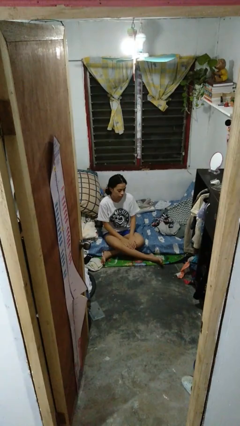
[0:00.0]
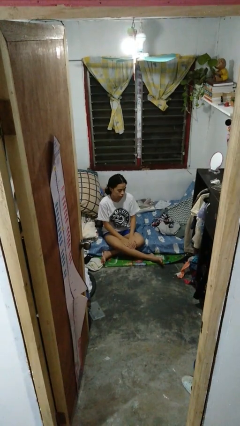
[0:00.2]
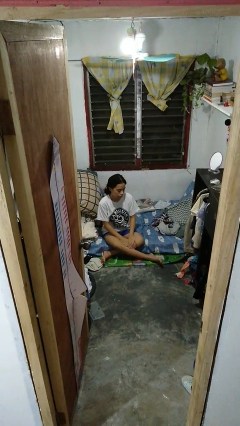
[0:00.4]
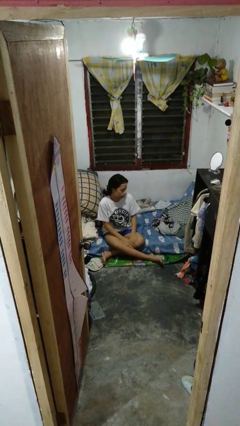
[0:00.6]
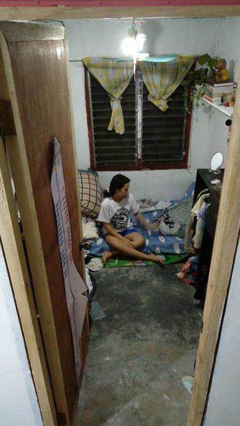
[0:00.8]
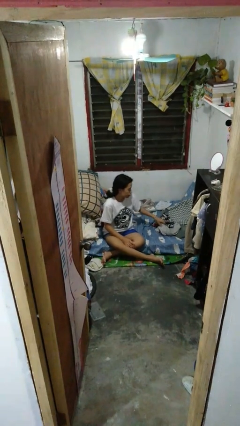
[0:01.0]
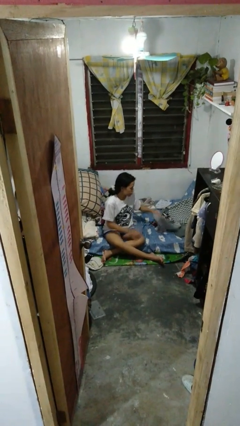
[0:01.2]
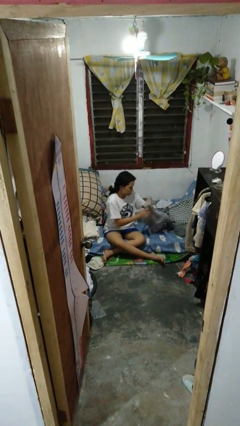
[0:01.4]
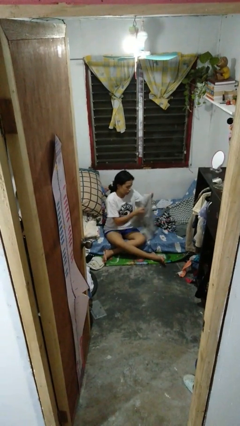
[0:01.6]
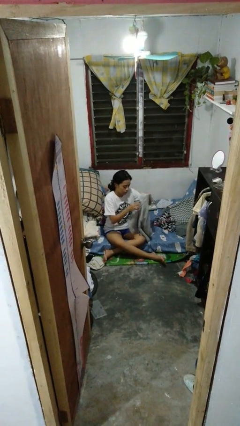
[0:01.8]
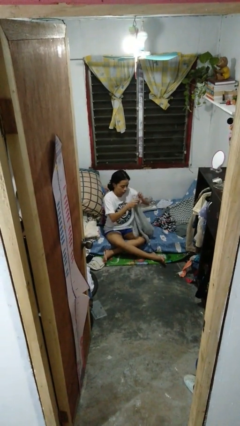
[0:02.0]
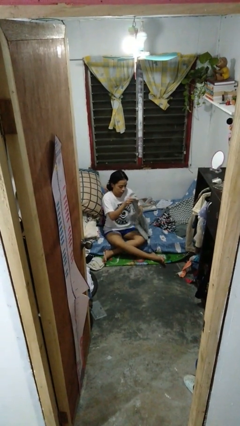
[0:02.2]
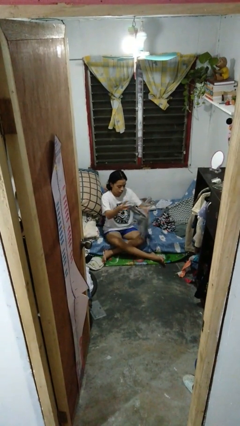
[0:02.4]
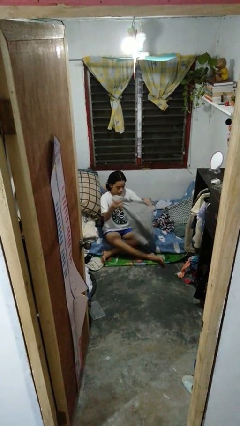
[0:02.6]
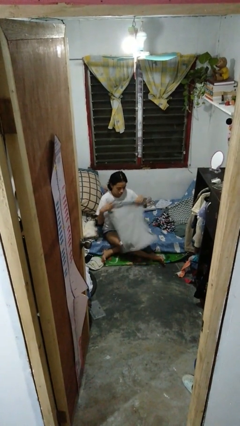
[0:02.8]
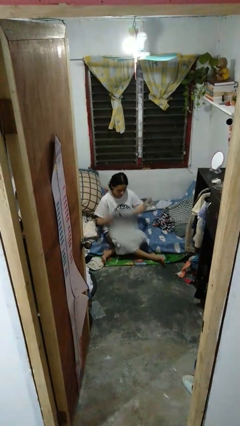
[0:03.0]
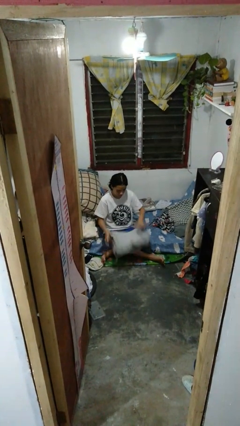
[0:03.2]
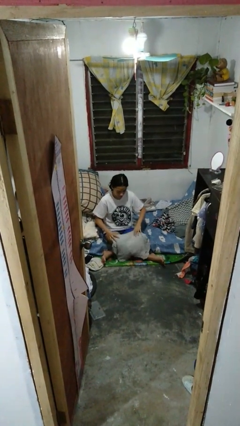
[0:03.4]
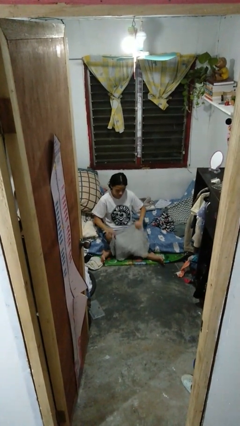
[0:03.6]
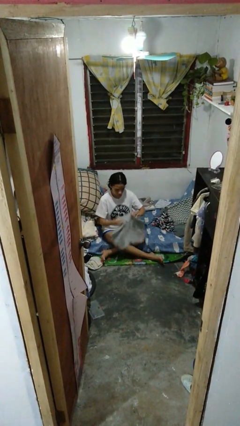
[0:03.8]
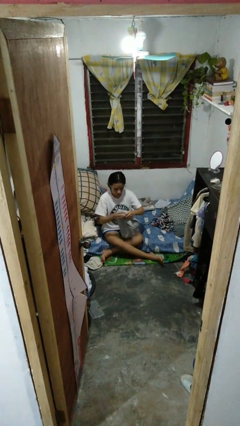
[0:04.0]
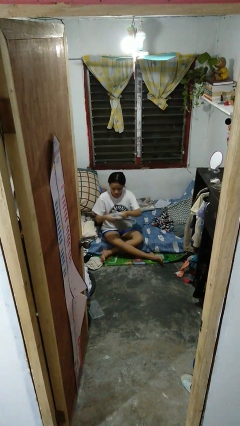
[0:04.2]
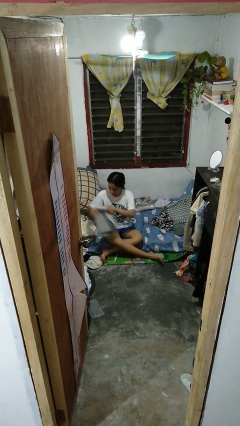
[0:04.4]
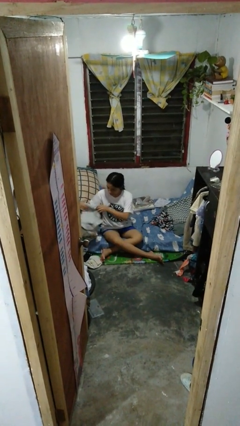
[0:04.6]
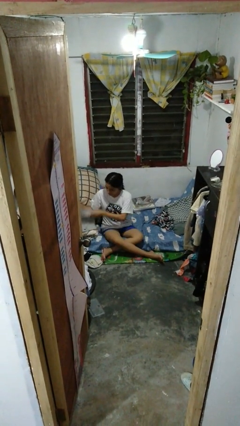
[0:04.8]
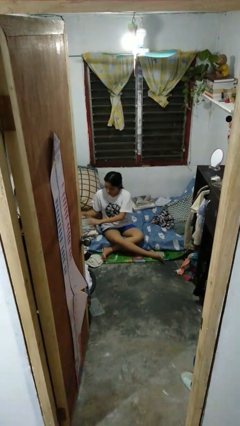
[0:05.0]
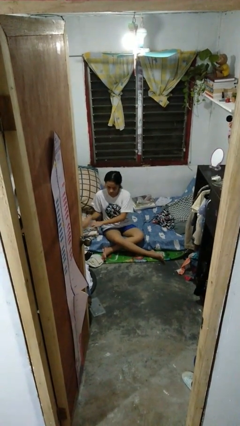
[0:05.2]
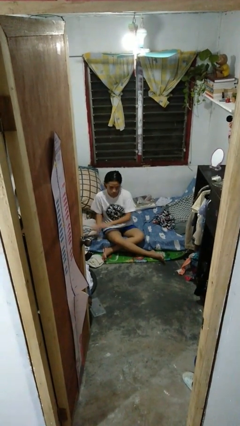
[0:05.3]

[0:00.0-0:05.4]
person folds shirt

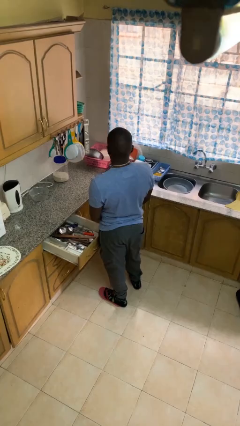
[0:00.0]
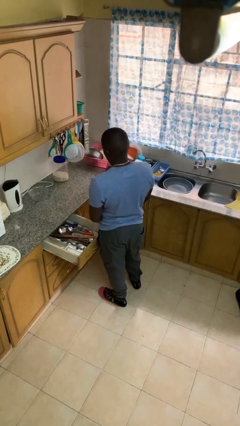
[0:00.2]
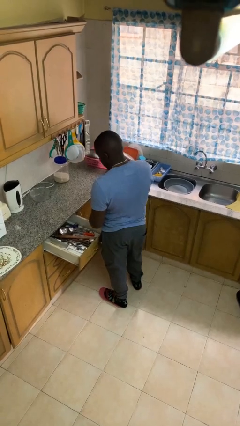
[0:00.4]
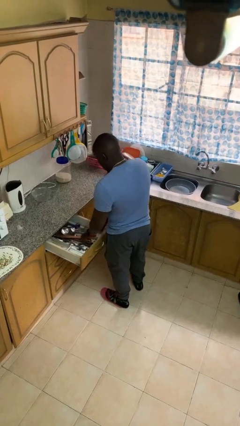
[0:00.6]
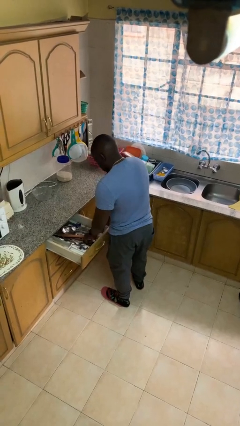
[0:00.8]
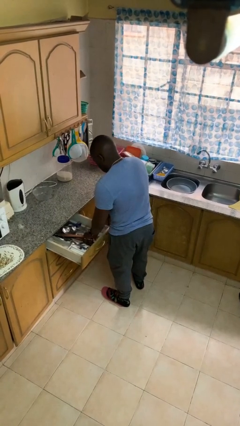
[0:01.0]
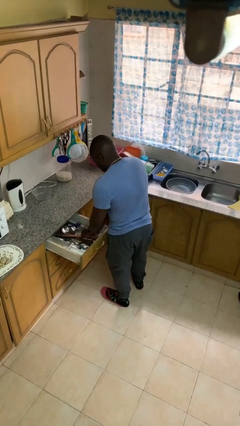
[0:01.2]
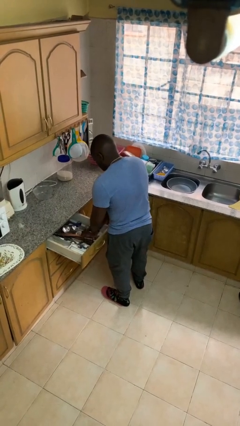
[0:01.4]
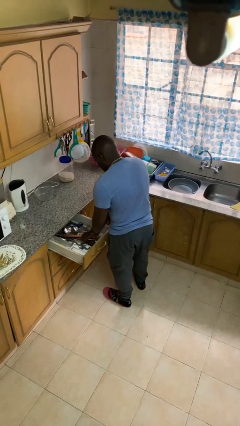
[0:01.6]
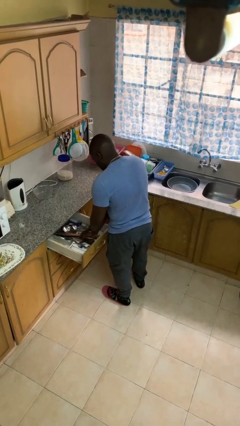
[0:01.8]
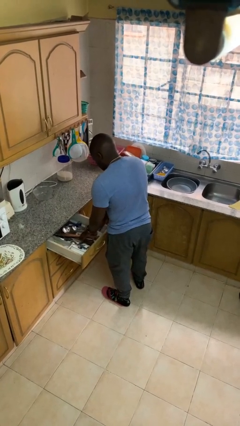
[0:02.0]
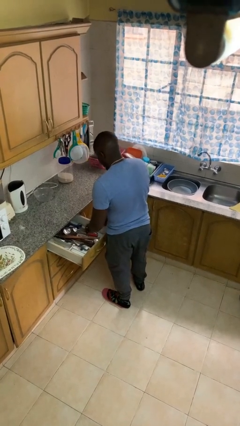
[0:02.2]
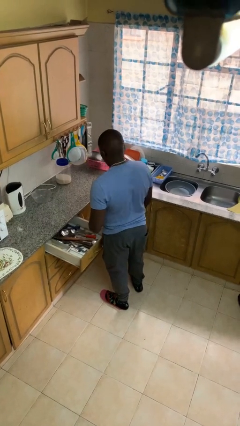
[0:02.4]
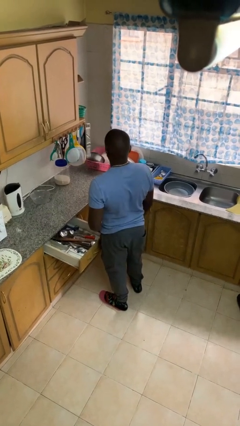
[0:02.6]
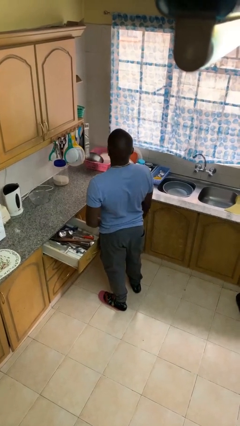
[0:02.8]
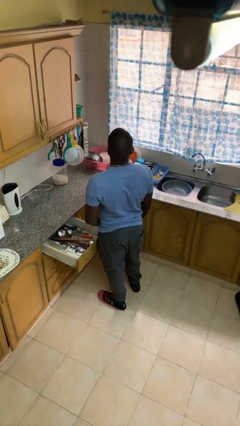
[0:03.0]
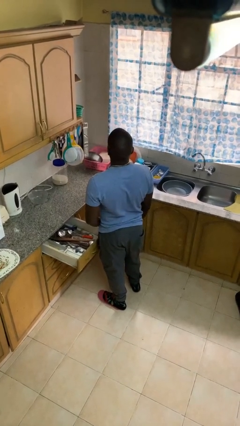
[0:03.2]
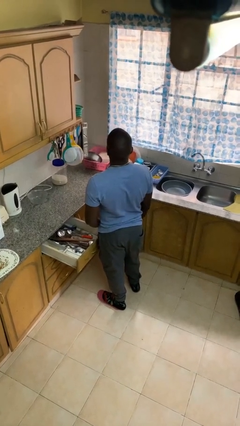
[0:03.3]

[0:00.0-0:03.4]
person searches in kitchen drawer

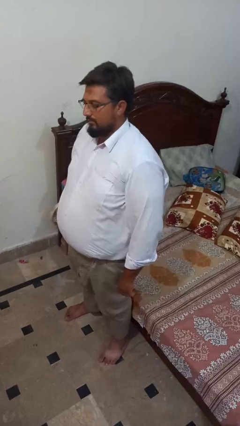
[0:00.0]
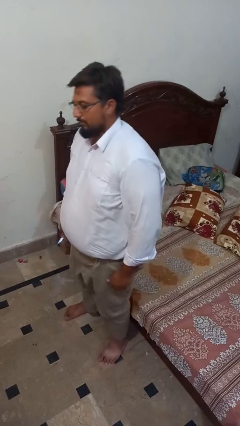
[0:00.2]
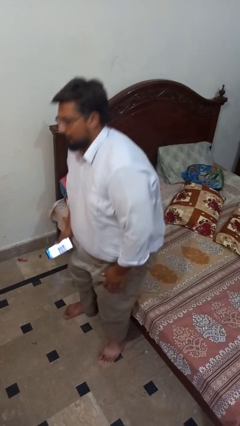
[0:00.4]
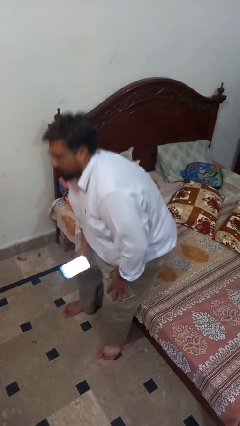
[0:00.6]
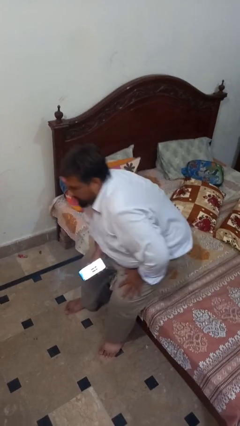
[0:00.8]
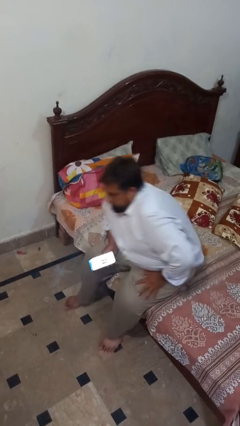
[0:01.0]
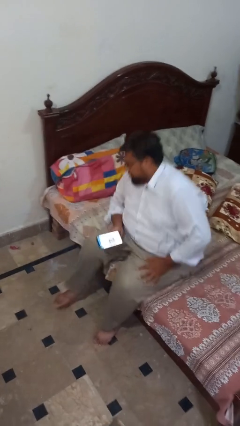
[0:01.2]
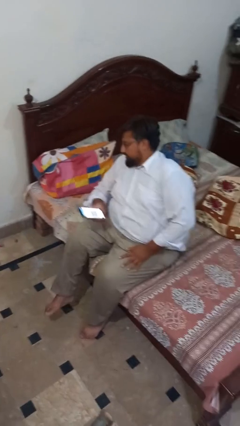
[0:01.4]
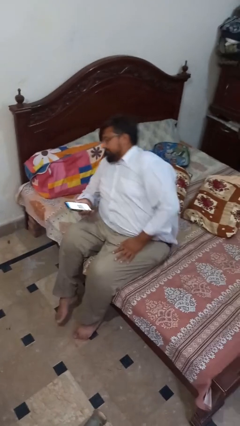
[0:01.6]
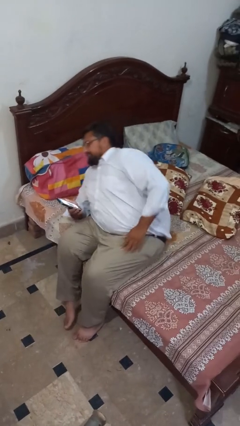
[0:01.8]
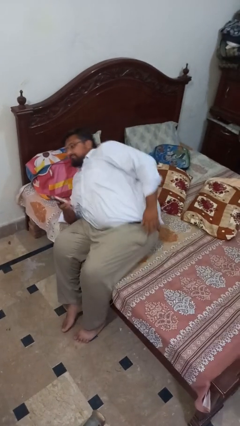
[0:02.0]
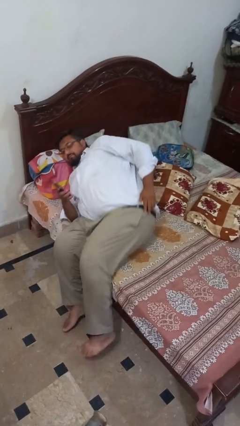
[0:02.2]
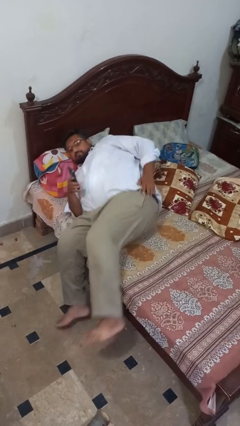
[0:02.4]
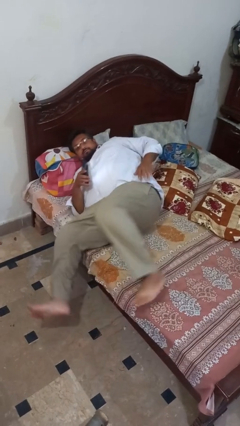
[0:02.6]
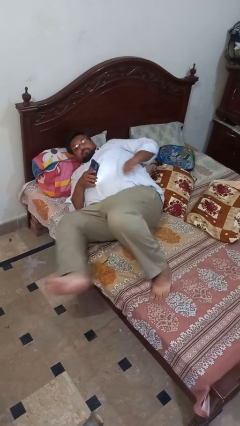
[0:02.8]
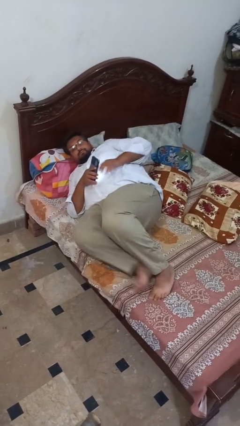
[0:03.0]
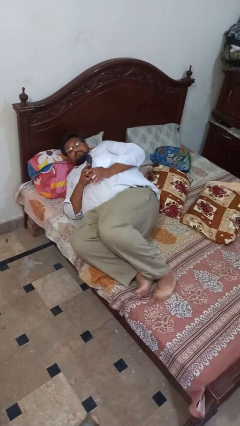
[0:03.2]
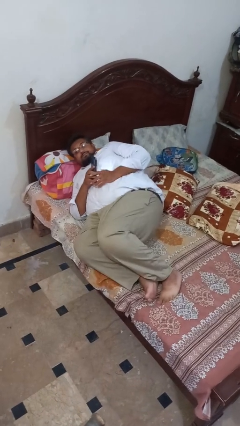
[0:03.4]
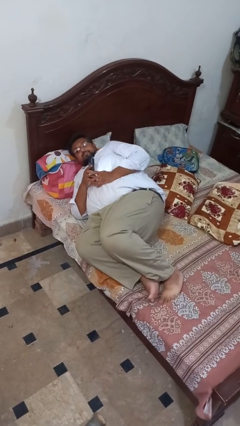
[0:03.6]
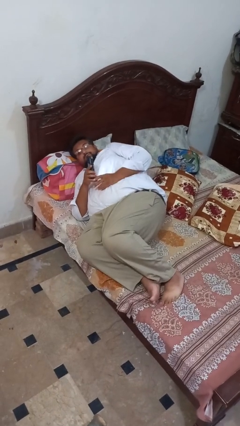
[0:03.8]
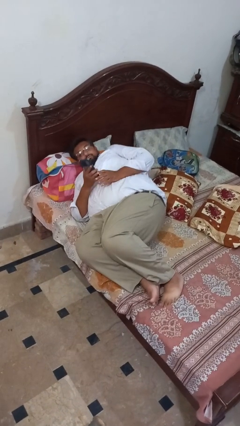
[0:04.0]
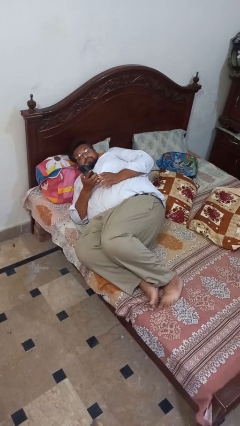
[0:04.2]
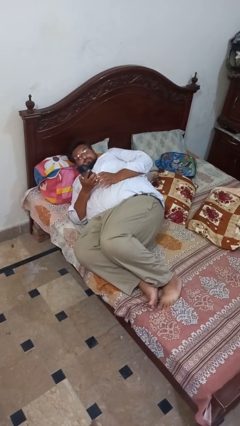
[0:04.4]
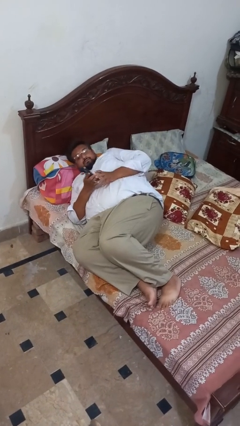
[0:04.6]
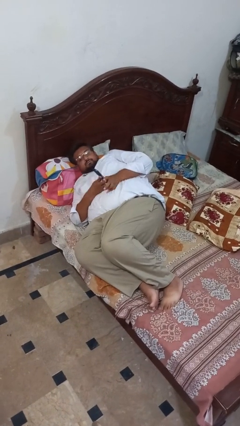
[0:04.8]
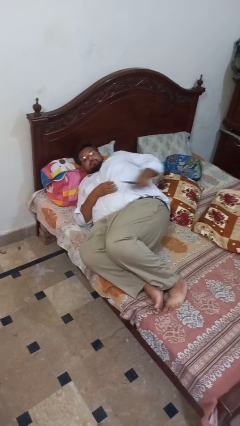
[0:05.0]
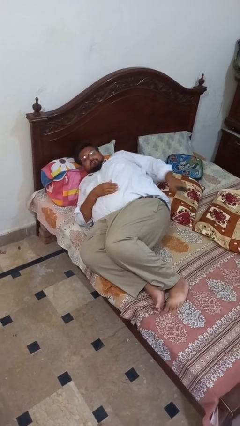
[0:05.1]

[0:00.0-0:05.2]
person lies down on bed

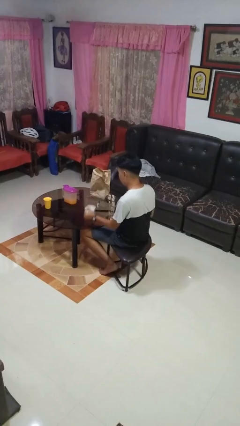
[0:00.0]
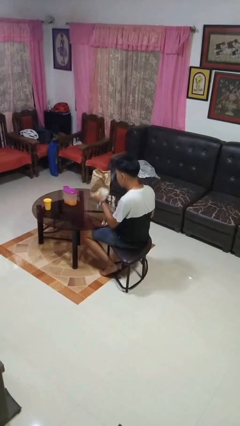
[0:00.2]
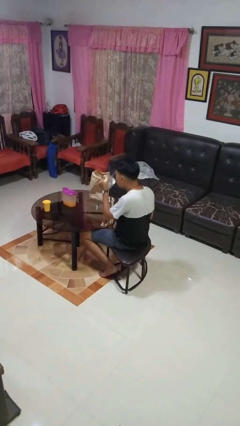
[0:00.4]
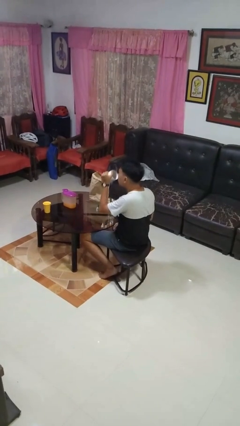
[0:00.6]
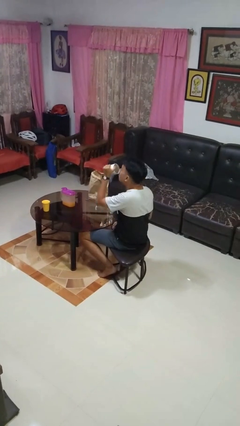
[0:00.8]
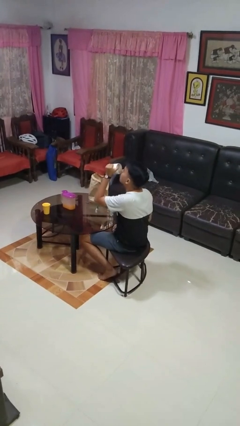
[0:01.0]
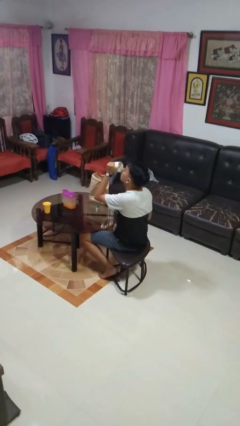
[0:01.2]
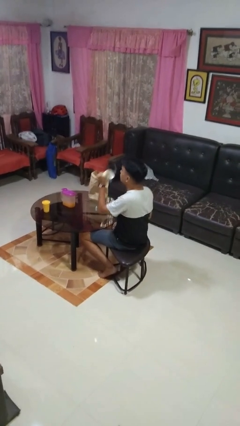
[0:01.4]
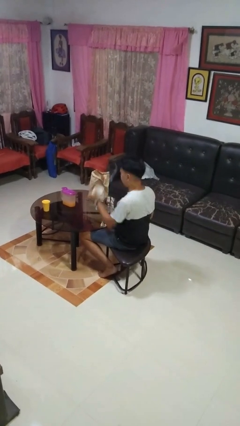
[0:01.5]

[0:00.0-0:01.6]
person drinks from mug

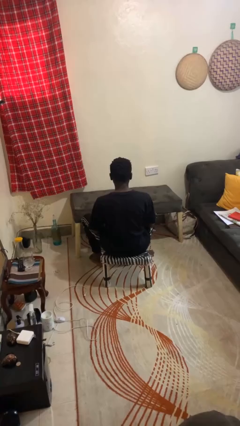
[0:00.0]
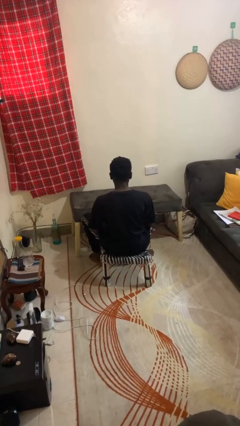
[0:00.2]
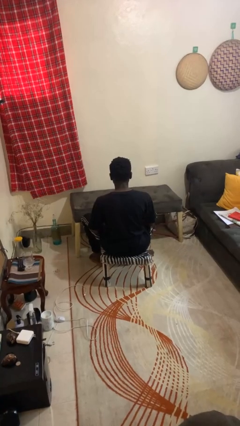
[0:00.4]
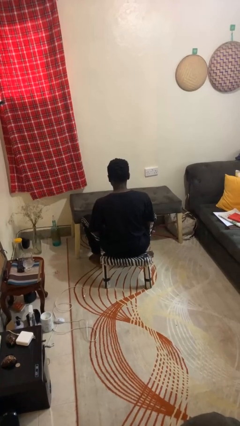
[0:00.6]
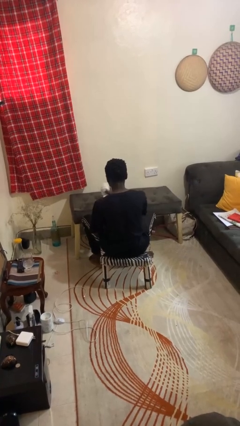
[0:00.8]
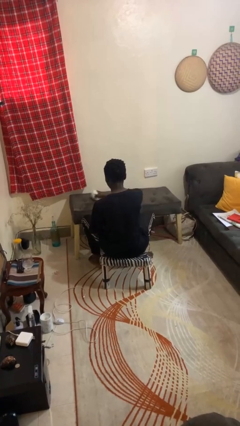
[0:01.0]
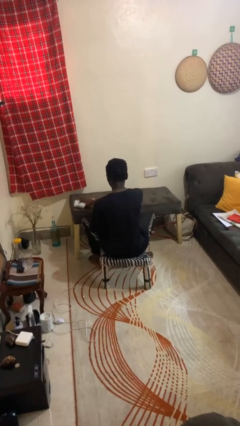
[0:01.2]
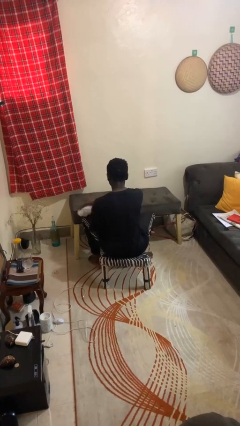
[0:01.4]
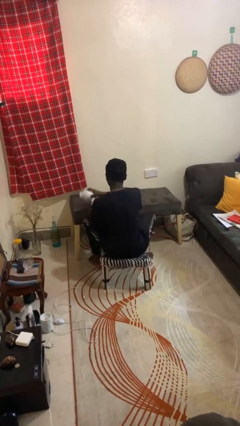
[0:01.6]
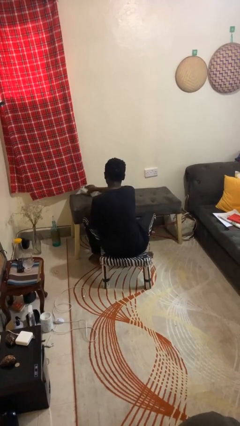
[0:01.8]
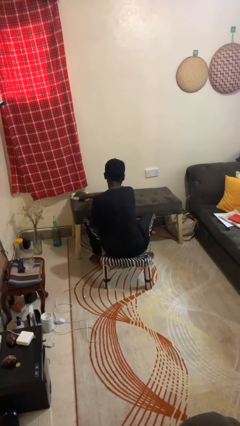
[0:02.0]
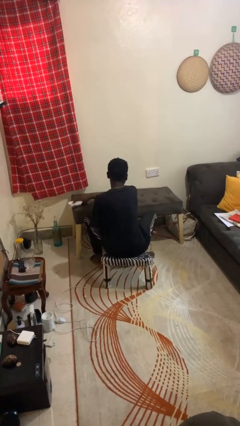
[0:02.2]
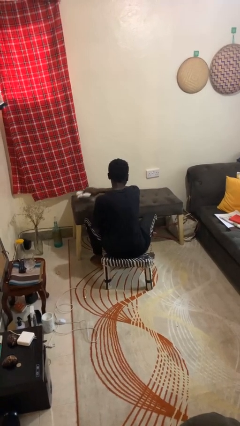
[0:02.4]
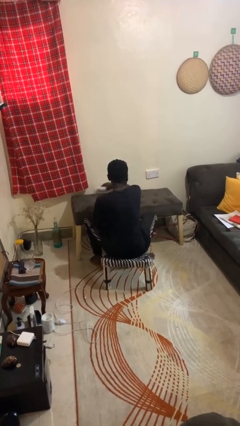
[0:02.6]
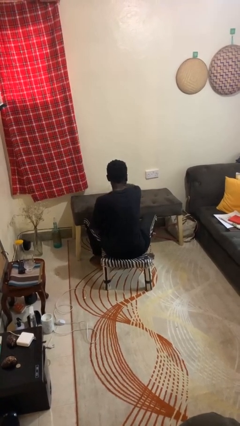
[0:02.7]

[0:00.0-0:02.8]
person cleans table with rag
